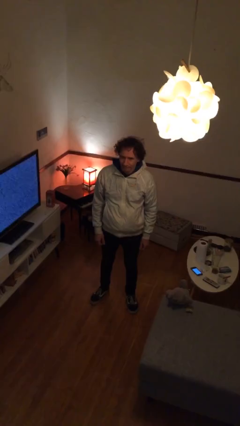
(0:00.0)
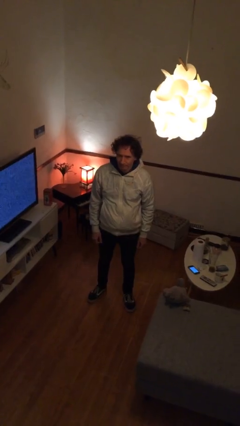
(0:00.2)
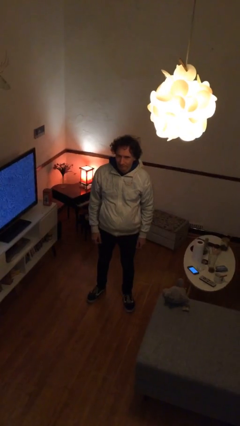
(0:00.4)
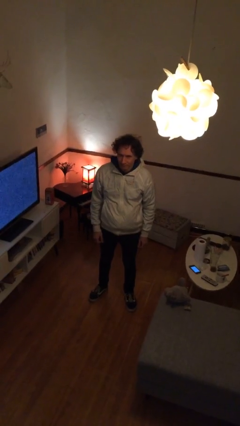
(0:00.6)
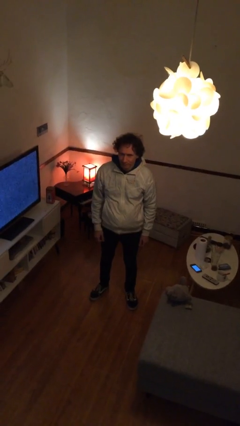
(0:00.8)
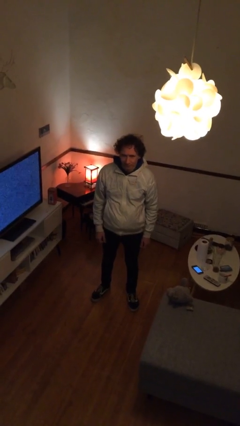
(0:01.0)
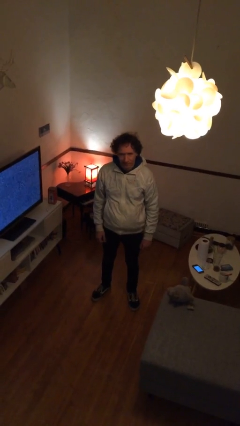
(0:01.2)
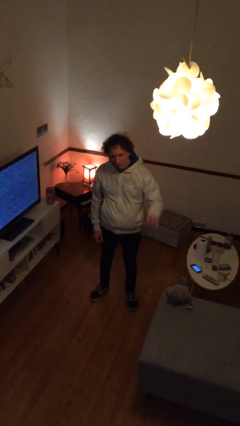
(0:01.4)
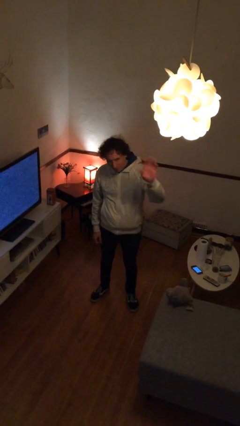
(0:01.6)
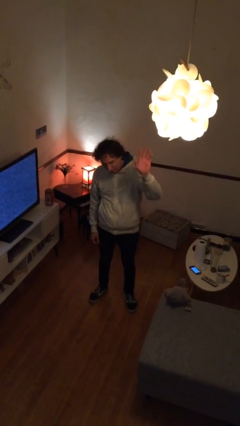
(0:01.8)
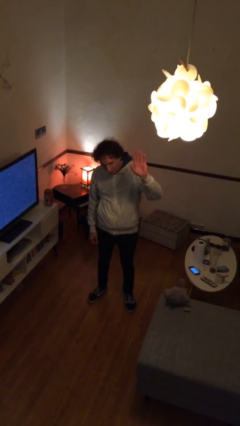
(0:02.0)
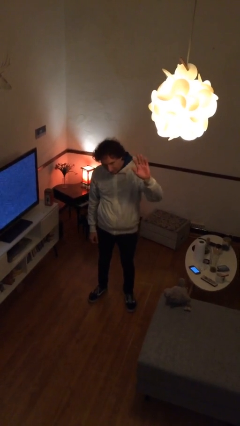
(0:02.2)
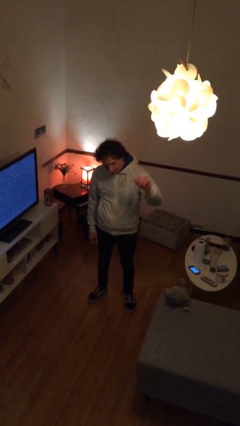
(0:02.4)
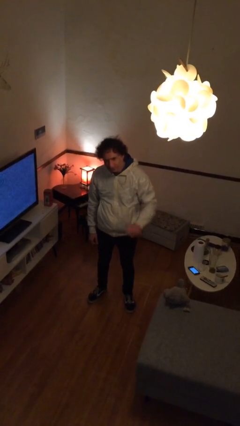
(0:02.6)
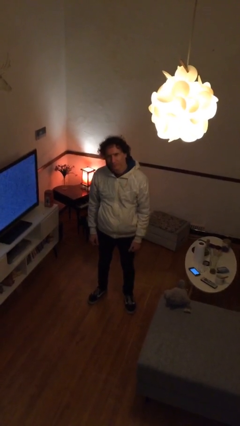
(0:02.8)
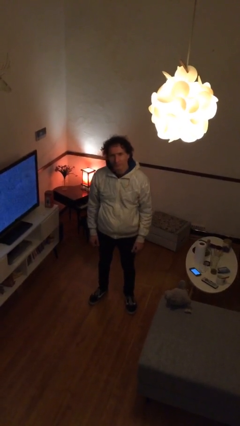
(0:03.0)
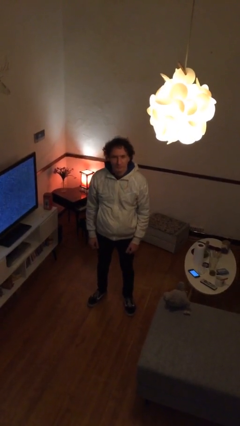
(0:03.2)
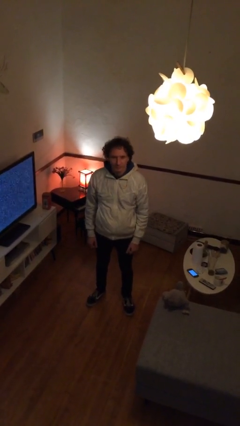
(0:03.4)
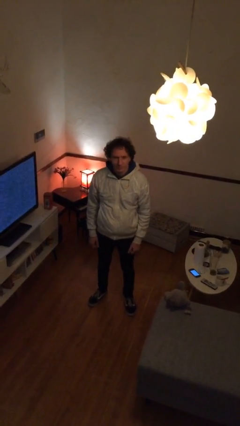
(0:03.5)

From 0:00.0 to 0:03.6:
person waves at person

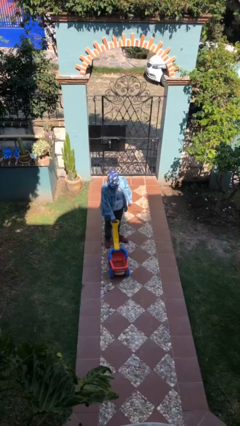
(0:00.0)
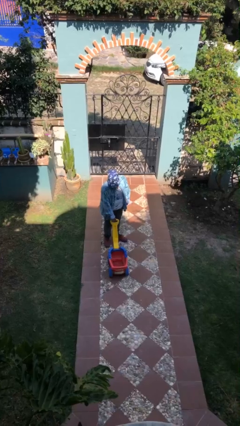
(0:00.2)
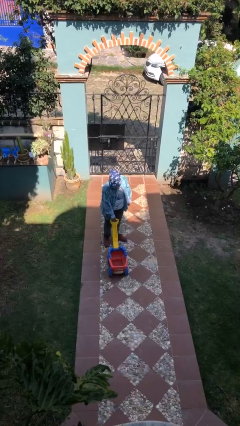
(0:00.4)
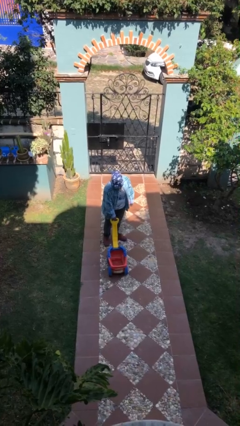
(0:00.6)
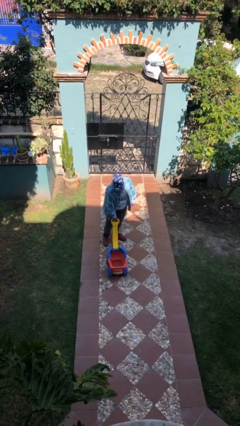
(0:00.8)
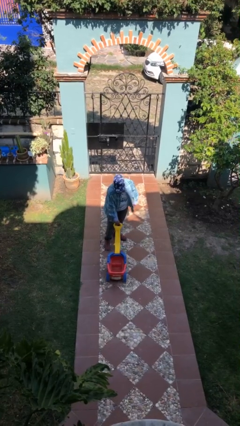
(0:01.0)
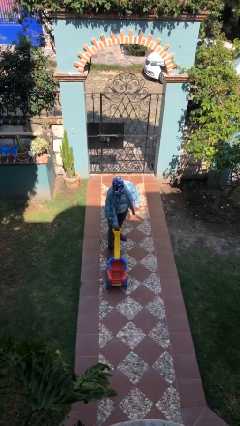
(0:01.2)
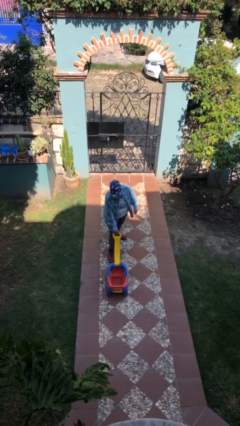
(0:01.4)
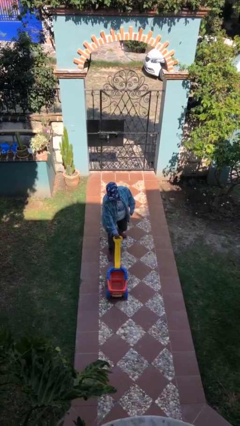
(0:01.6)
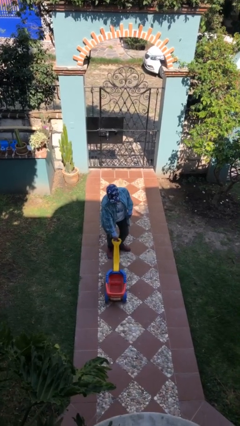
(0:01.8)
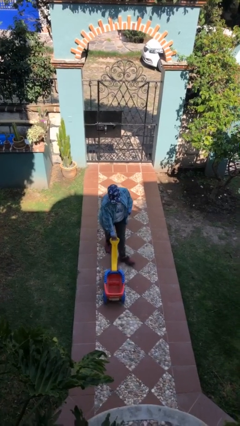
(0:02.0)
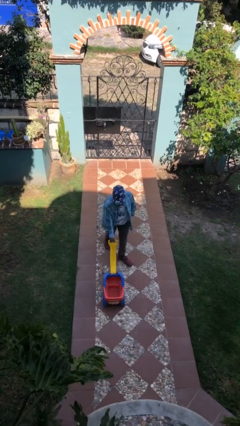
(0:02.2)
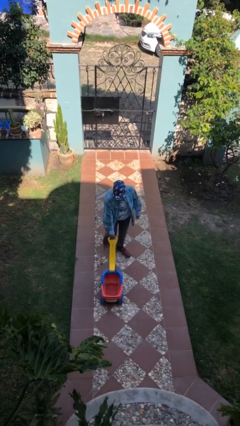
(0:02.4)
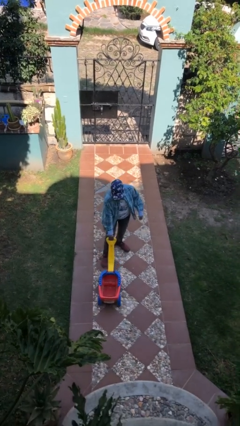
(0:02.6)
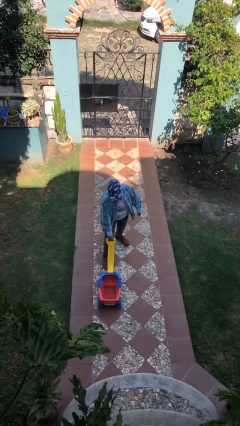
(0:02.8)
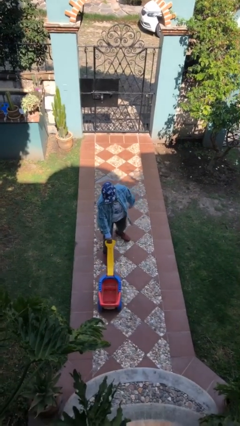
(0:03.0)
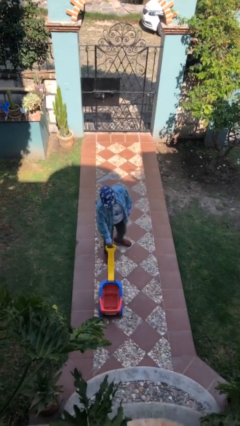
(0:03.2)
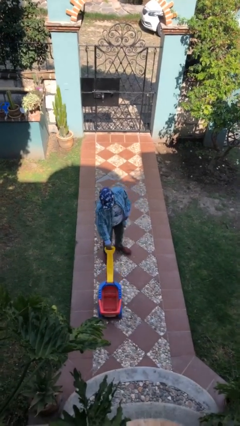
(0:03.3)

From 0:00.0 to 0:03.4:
person pushes wheeled cart

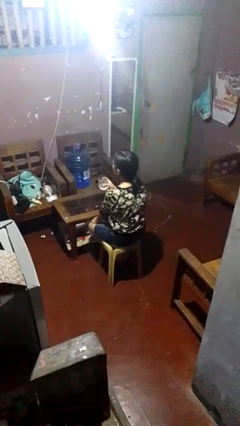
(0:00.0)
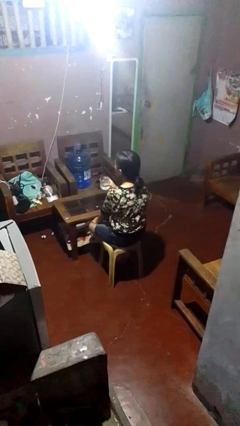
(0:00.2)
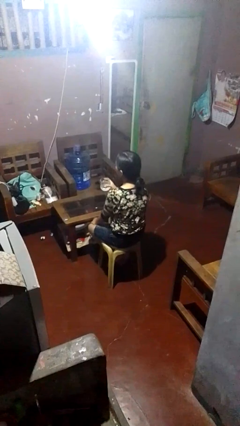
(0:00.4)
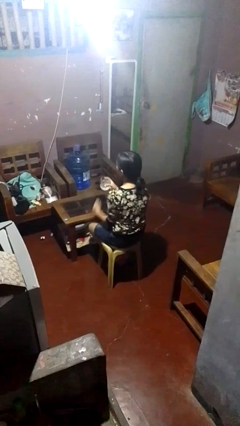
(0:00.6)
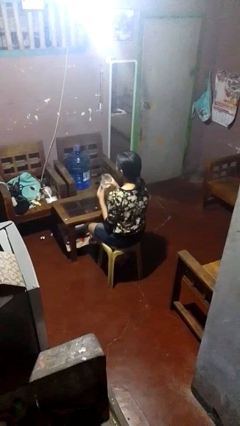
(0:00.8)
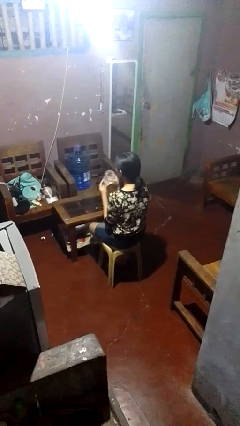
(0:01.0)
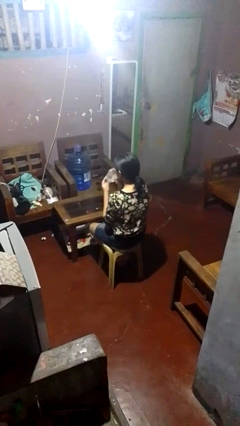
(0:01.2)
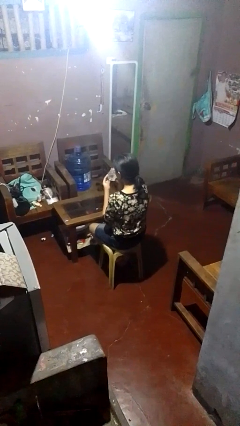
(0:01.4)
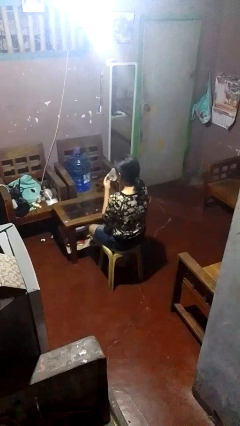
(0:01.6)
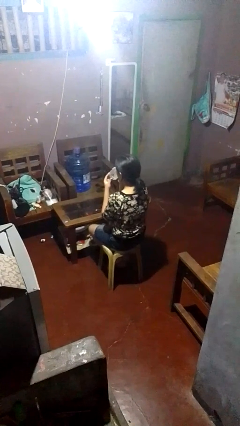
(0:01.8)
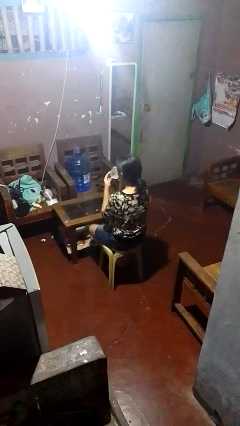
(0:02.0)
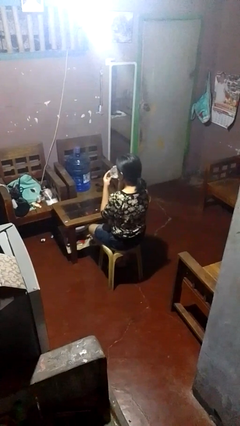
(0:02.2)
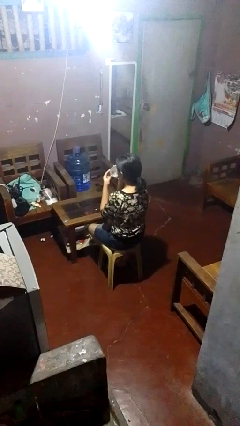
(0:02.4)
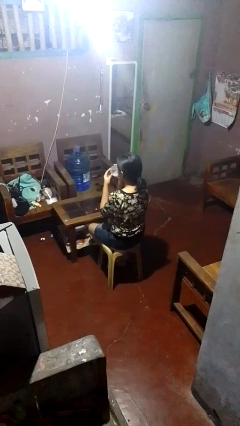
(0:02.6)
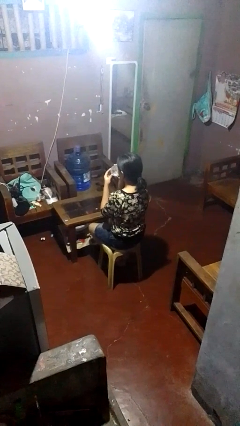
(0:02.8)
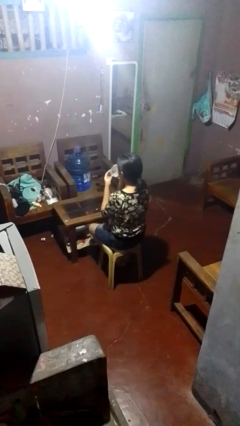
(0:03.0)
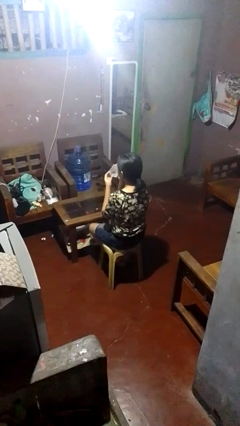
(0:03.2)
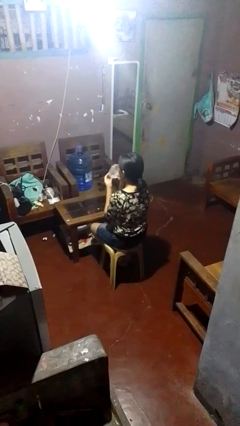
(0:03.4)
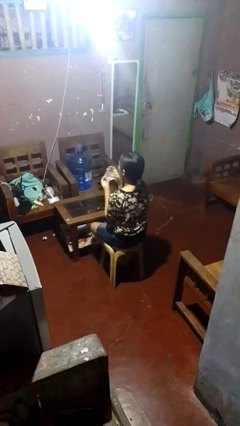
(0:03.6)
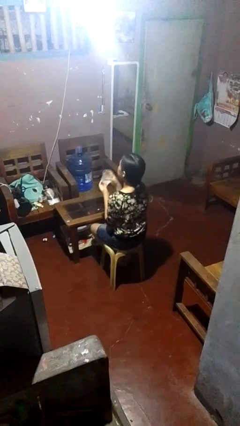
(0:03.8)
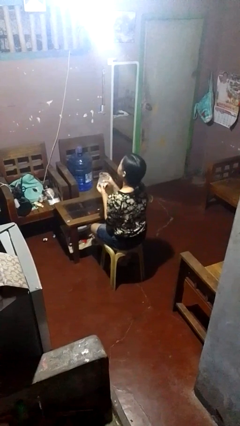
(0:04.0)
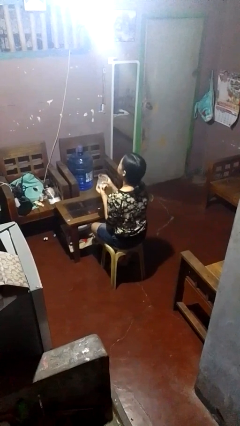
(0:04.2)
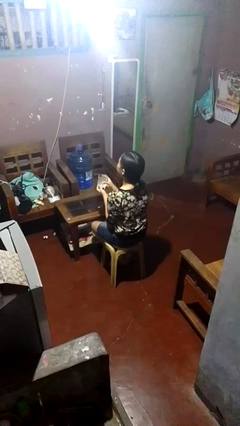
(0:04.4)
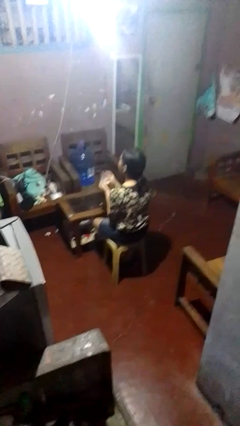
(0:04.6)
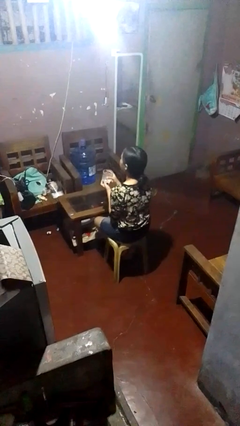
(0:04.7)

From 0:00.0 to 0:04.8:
person drinks from mug

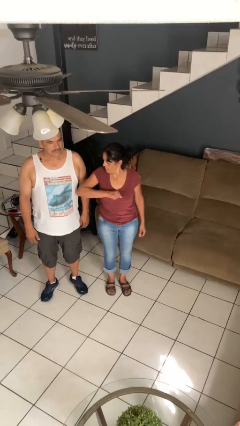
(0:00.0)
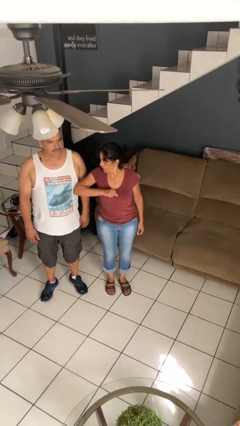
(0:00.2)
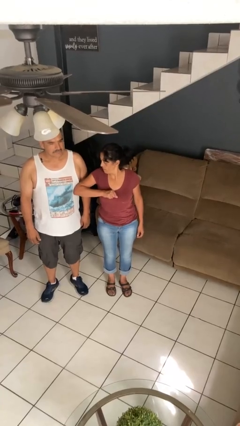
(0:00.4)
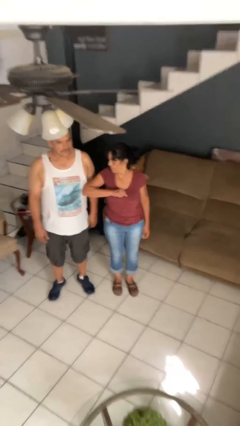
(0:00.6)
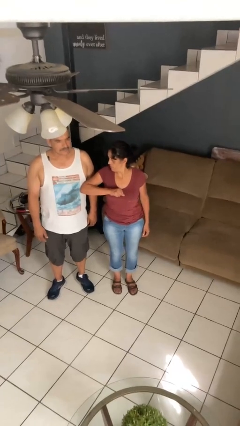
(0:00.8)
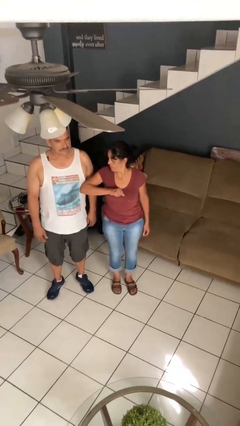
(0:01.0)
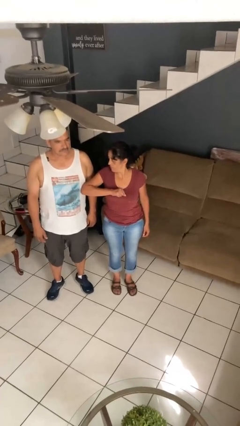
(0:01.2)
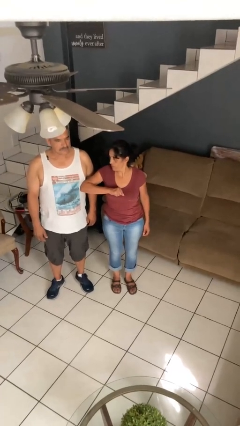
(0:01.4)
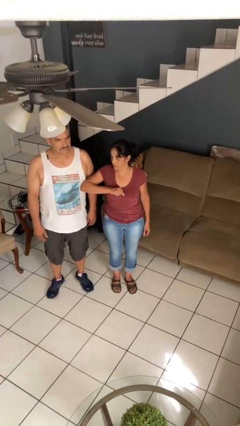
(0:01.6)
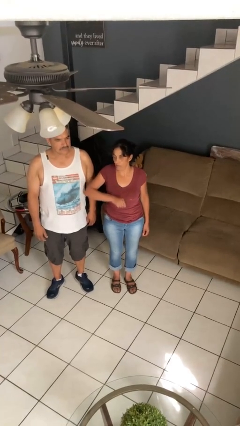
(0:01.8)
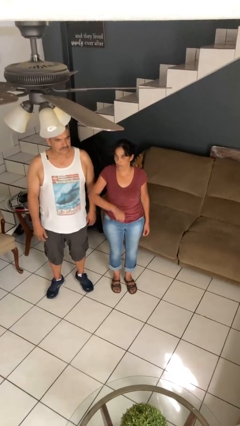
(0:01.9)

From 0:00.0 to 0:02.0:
person nudges person with elbow

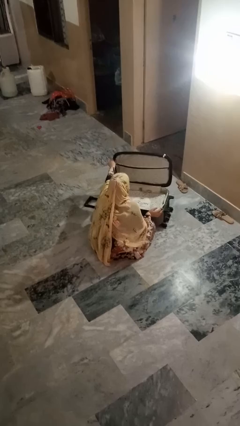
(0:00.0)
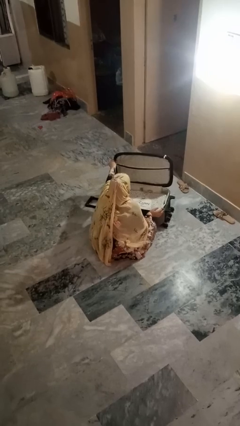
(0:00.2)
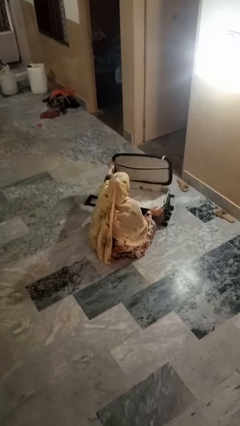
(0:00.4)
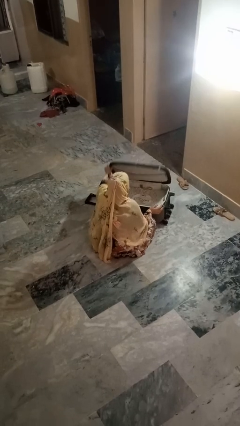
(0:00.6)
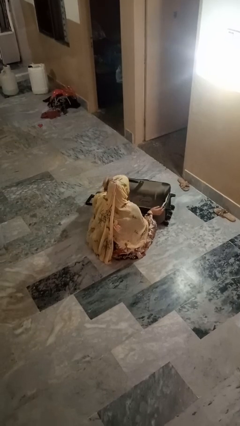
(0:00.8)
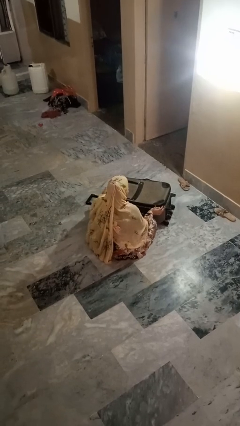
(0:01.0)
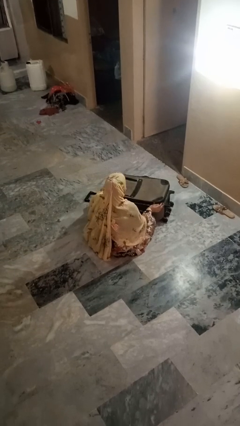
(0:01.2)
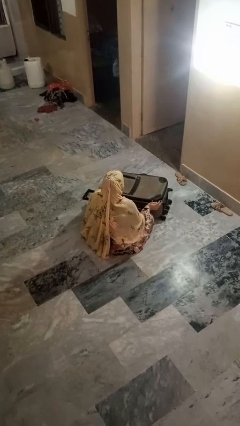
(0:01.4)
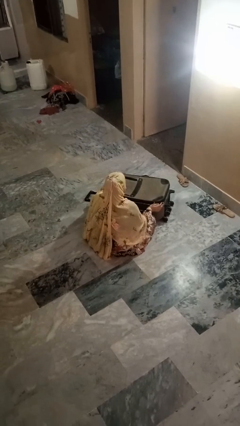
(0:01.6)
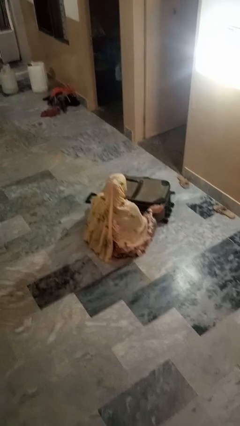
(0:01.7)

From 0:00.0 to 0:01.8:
person closes suitcase

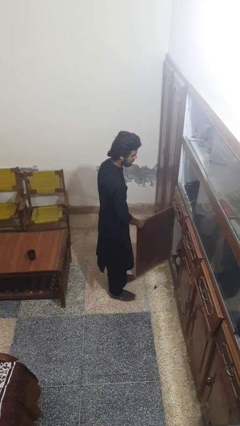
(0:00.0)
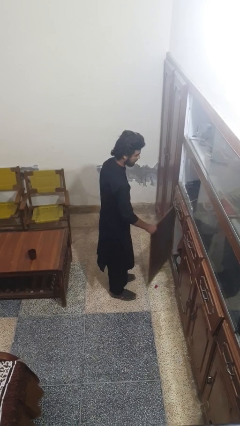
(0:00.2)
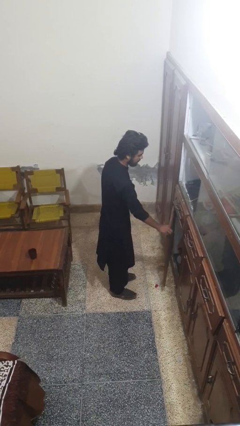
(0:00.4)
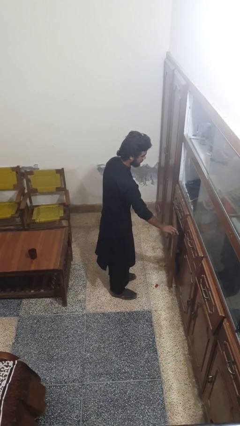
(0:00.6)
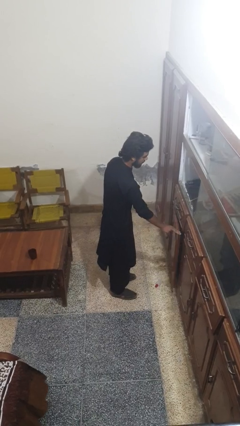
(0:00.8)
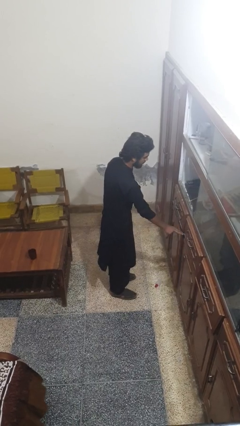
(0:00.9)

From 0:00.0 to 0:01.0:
person closes cabinet

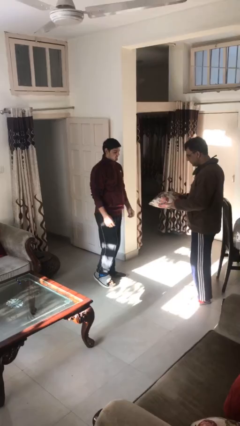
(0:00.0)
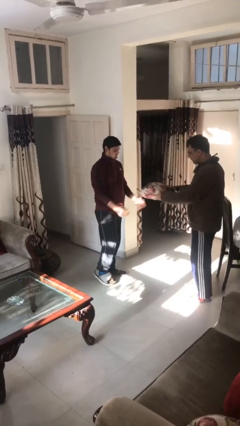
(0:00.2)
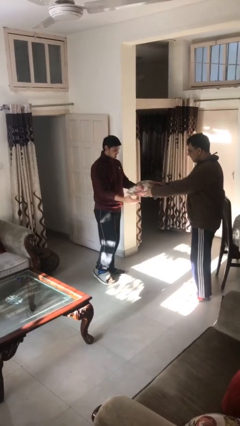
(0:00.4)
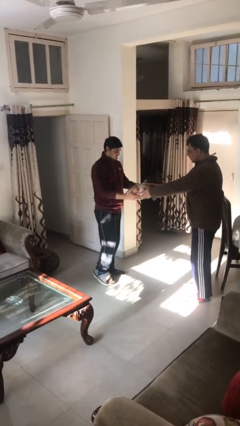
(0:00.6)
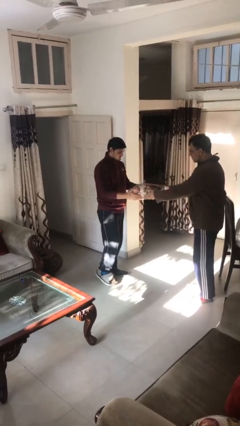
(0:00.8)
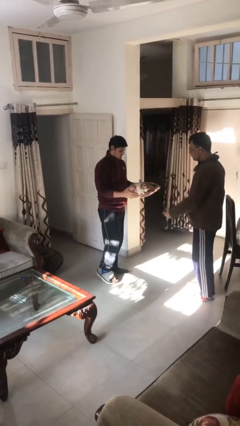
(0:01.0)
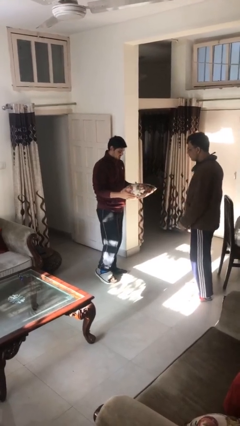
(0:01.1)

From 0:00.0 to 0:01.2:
person transfers object to person
